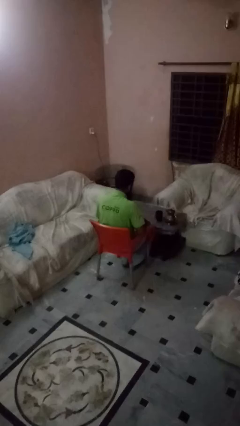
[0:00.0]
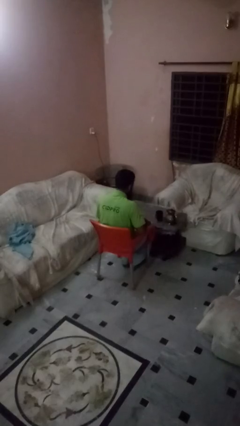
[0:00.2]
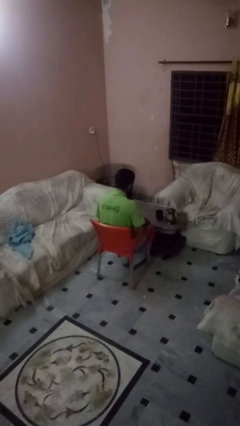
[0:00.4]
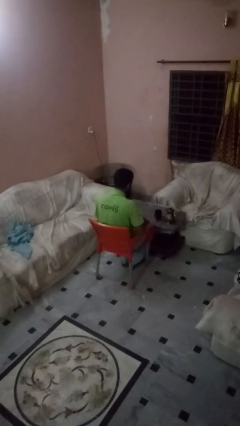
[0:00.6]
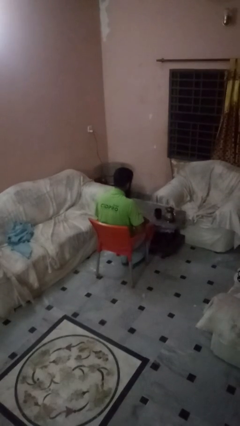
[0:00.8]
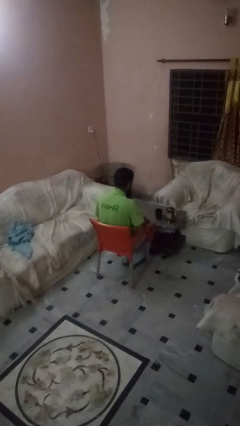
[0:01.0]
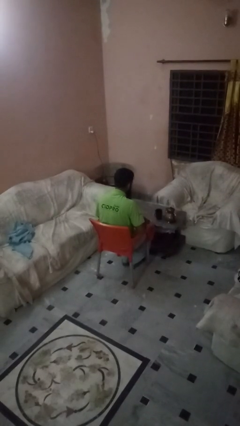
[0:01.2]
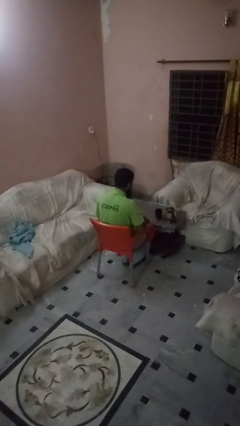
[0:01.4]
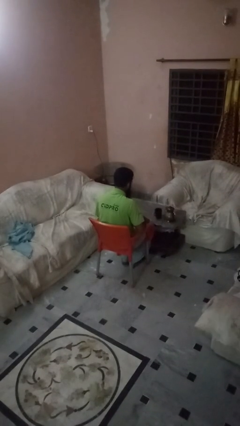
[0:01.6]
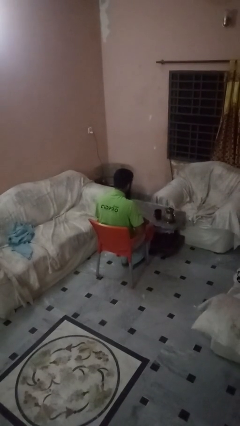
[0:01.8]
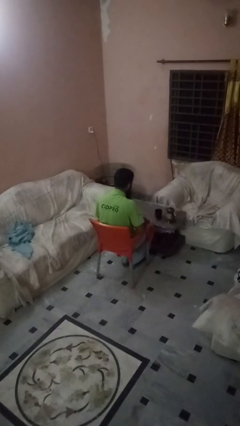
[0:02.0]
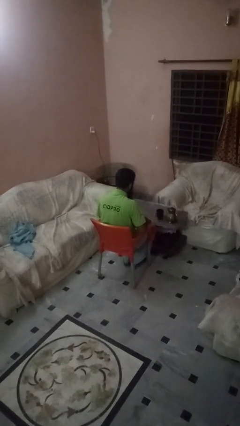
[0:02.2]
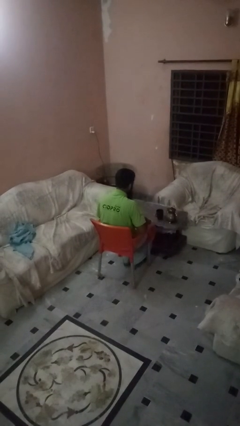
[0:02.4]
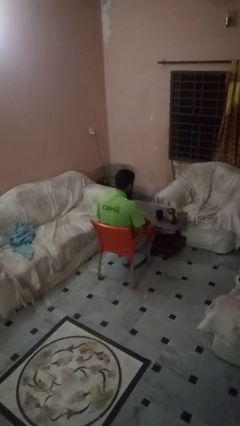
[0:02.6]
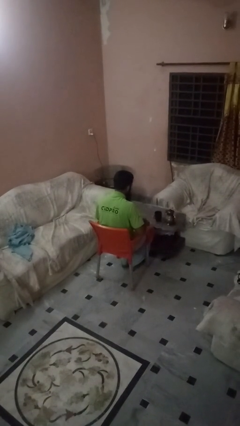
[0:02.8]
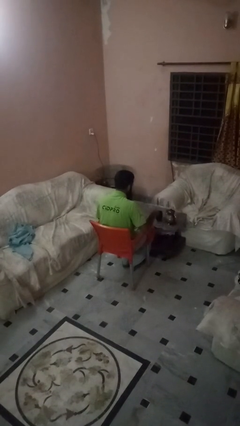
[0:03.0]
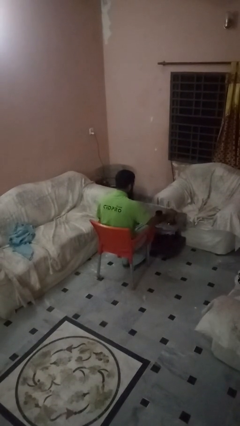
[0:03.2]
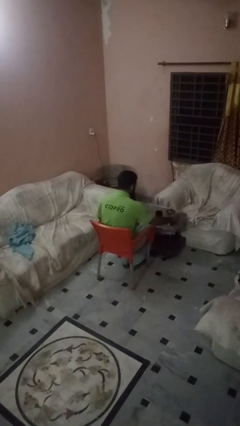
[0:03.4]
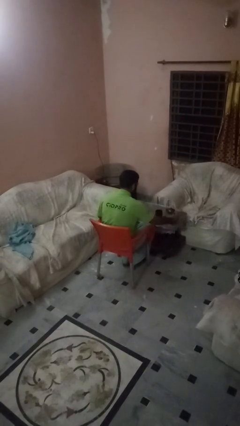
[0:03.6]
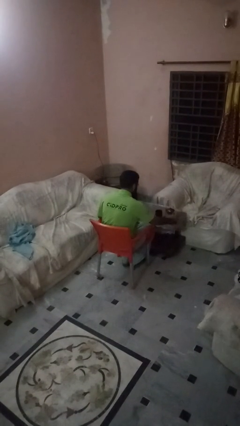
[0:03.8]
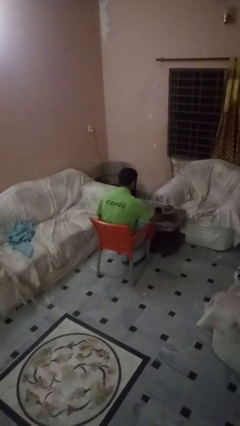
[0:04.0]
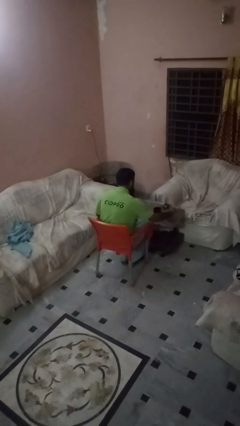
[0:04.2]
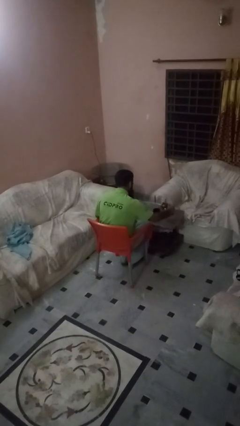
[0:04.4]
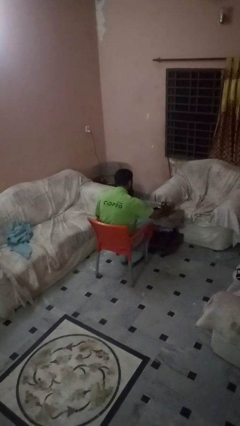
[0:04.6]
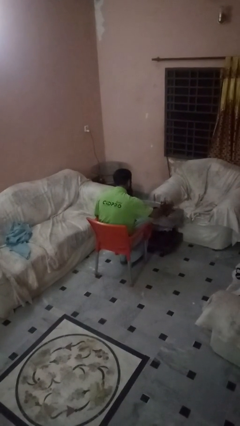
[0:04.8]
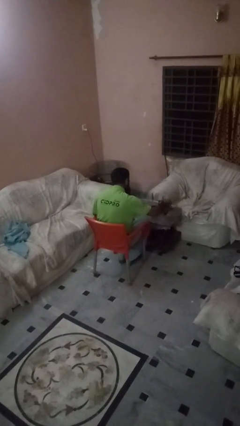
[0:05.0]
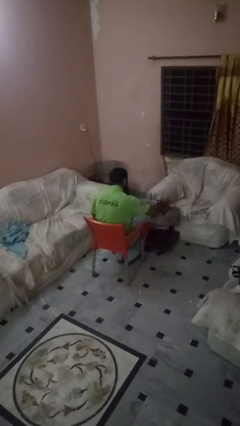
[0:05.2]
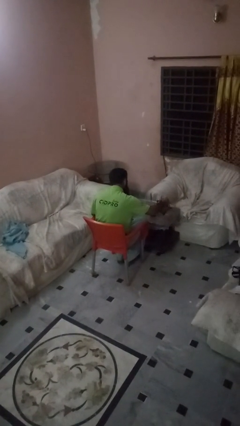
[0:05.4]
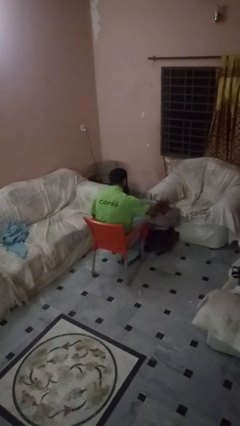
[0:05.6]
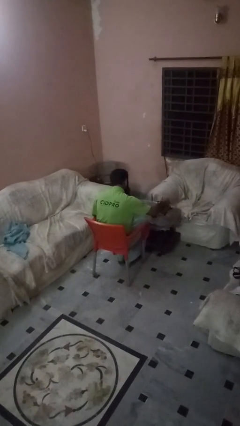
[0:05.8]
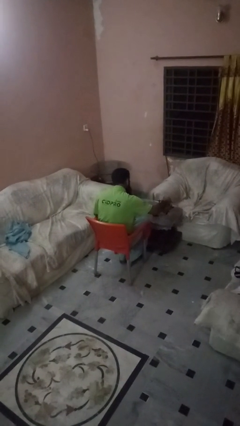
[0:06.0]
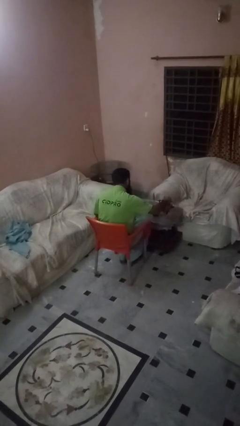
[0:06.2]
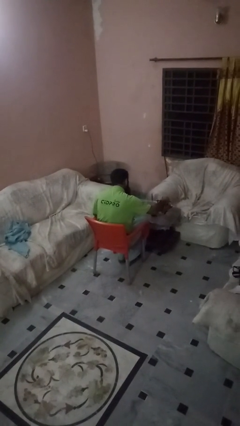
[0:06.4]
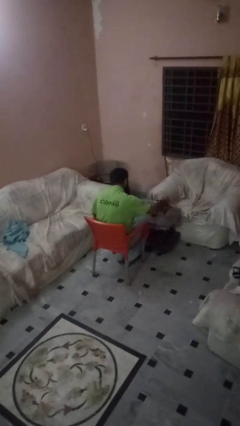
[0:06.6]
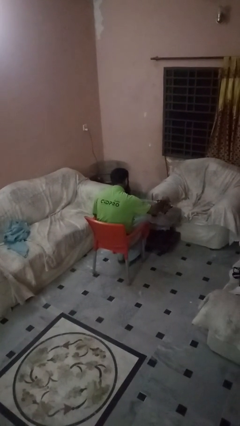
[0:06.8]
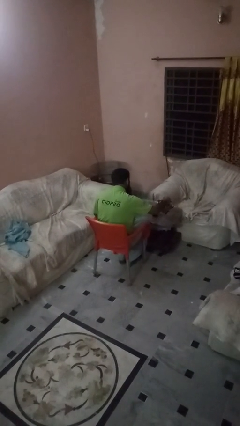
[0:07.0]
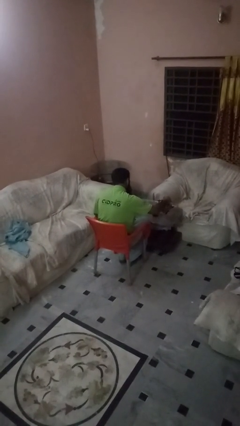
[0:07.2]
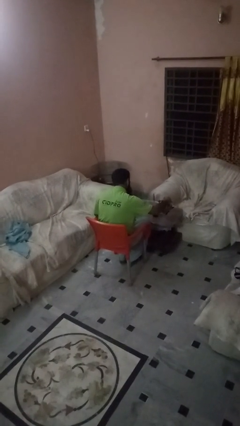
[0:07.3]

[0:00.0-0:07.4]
person pours coffee into mug

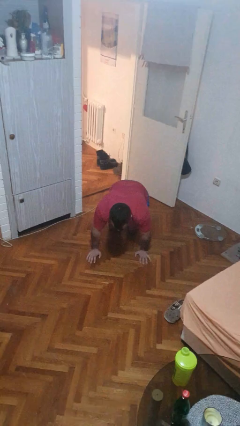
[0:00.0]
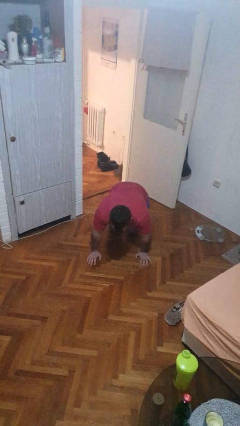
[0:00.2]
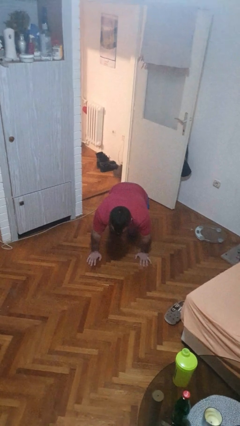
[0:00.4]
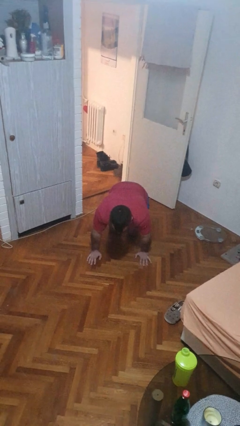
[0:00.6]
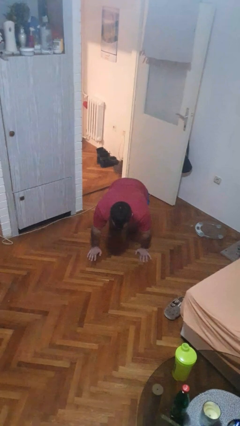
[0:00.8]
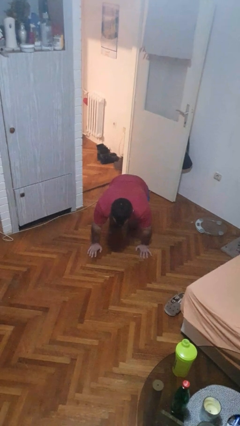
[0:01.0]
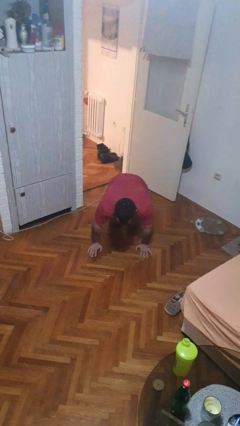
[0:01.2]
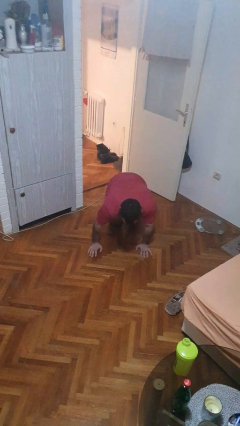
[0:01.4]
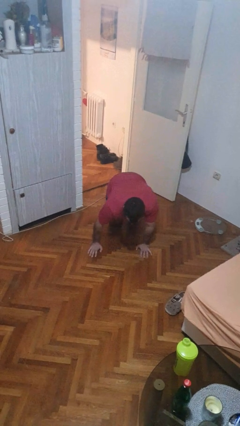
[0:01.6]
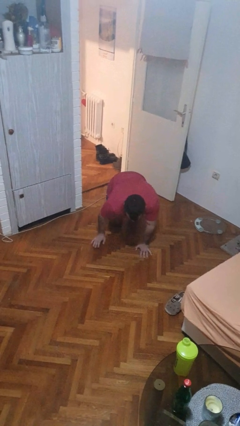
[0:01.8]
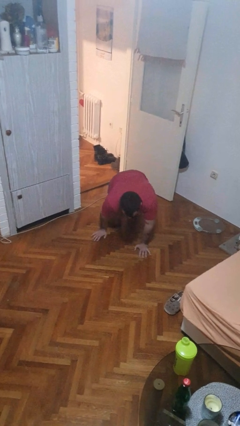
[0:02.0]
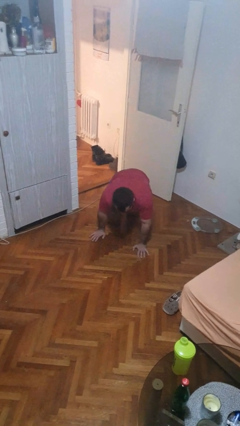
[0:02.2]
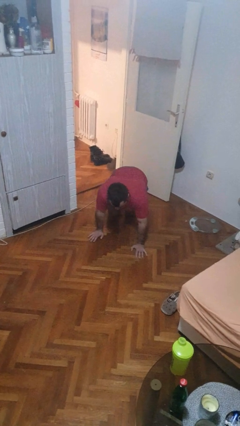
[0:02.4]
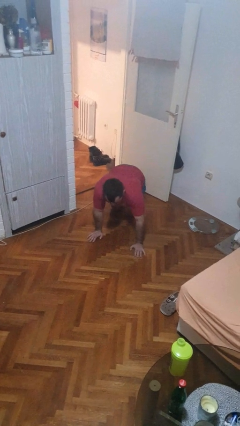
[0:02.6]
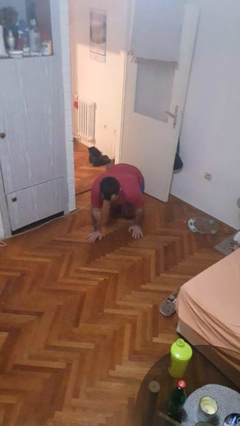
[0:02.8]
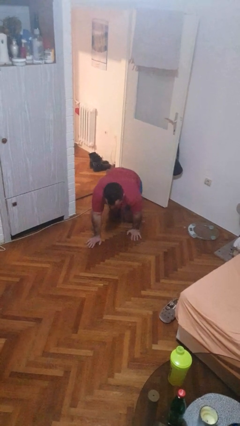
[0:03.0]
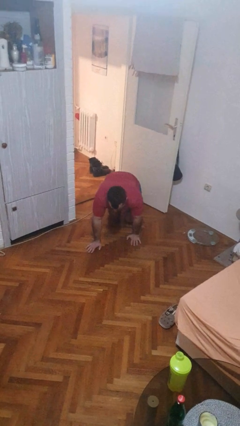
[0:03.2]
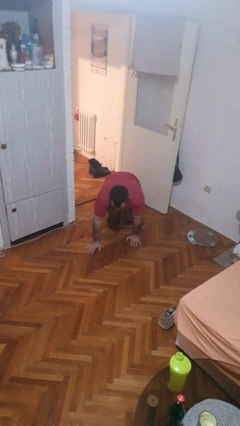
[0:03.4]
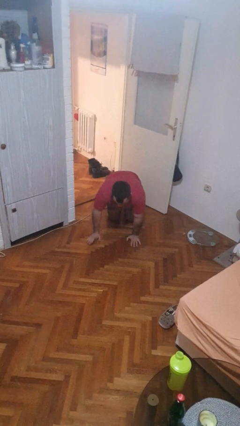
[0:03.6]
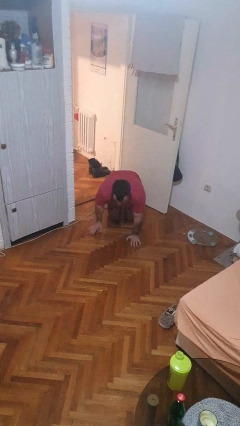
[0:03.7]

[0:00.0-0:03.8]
person crawls

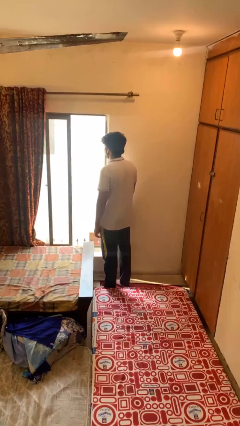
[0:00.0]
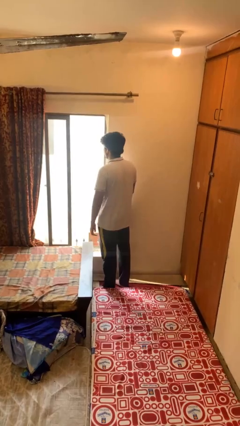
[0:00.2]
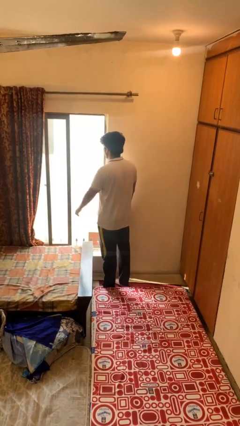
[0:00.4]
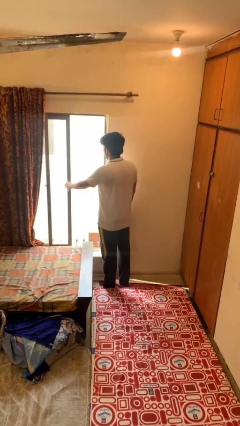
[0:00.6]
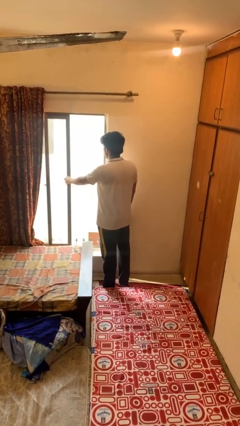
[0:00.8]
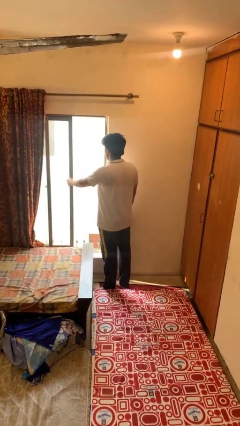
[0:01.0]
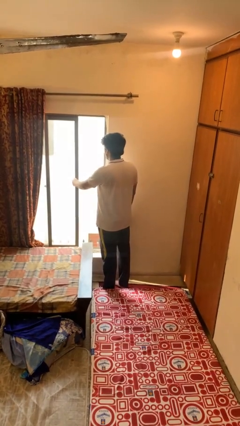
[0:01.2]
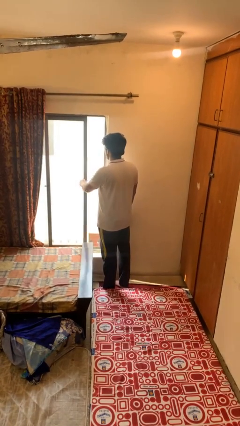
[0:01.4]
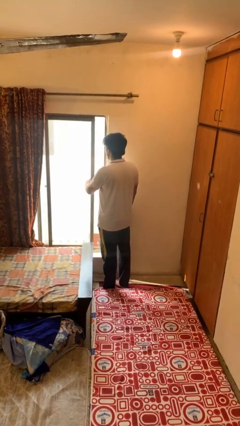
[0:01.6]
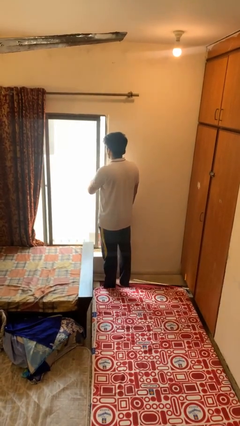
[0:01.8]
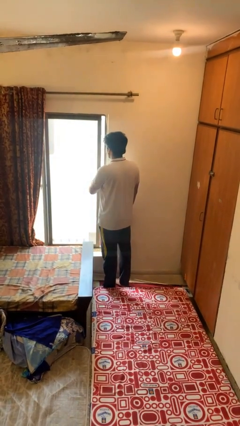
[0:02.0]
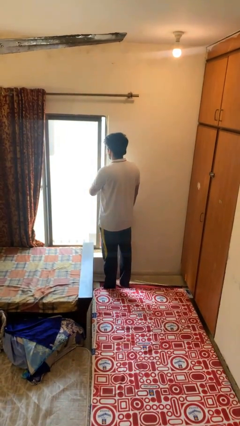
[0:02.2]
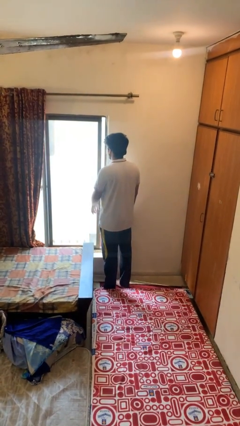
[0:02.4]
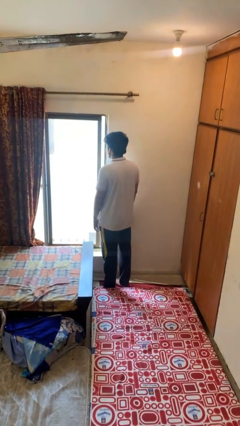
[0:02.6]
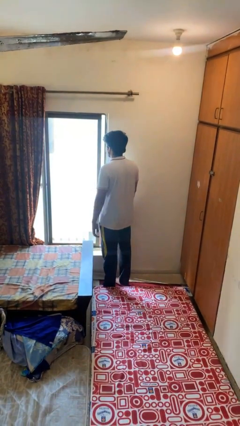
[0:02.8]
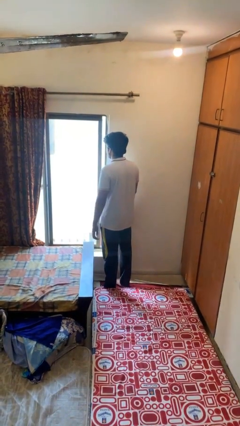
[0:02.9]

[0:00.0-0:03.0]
person closes home window

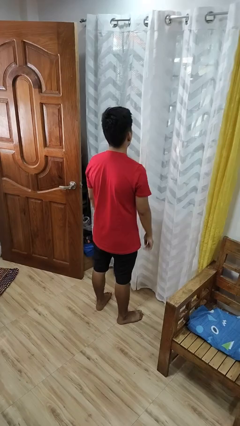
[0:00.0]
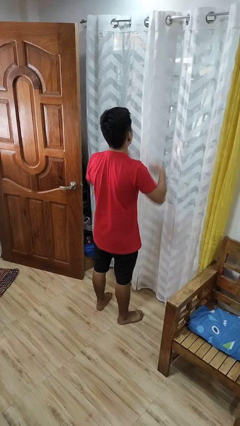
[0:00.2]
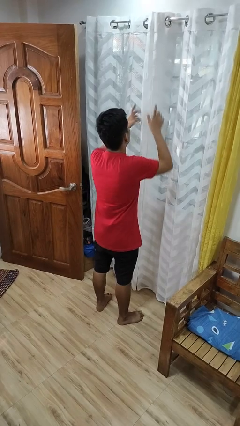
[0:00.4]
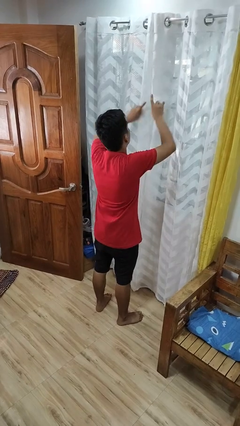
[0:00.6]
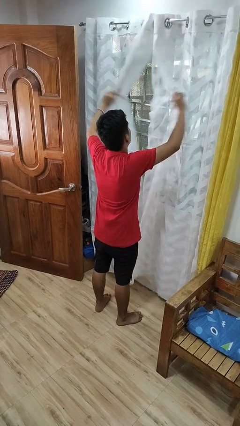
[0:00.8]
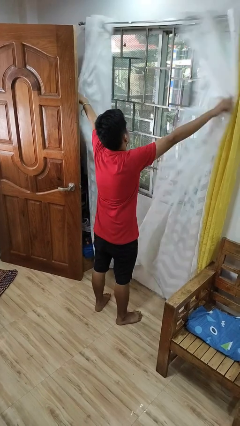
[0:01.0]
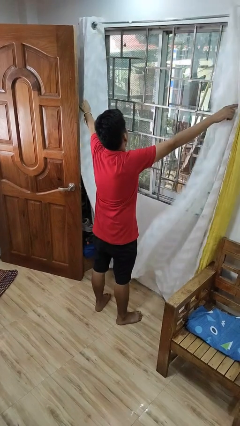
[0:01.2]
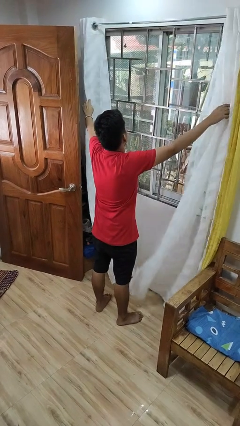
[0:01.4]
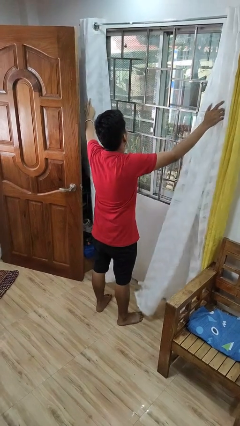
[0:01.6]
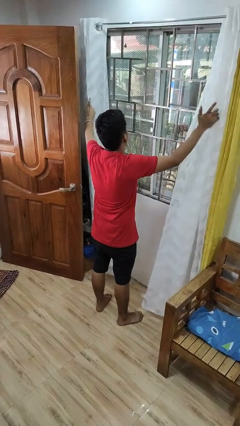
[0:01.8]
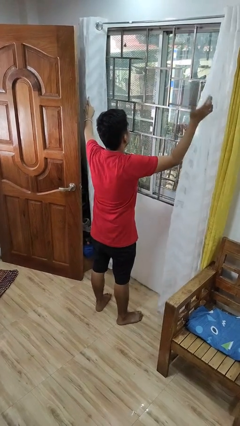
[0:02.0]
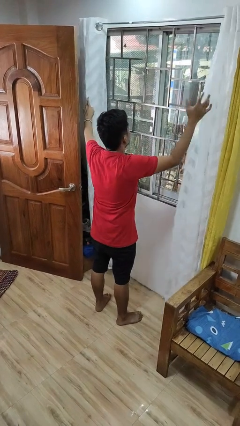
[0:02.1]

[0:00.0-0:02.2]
person opens curtains

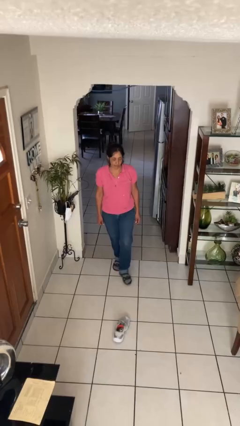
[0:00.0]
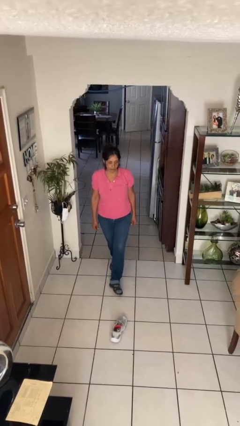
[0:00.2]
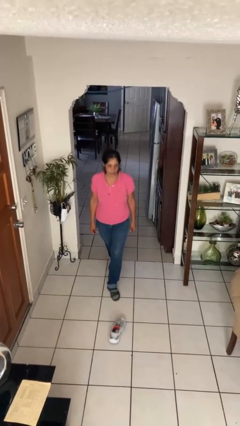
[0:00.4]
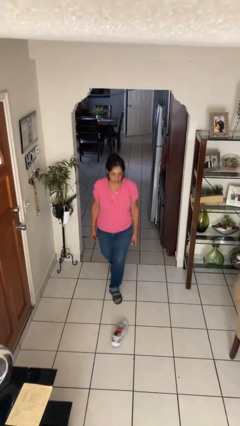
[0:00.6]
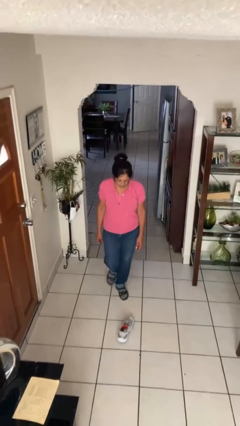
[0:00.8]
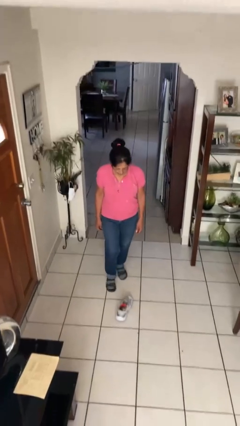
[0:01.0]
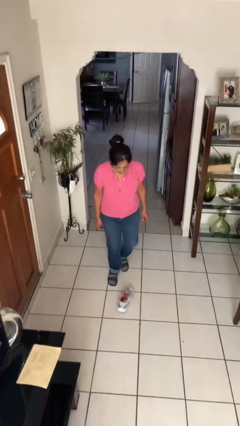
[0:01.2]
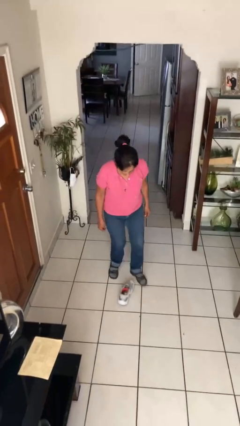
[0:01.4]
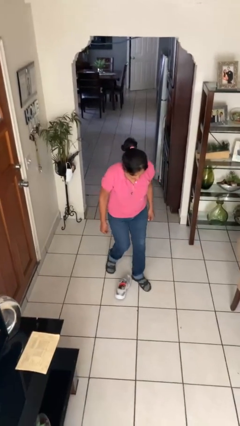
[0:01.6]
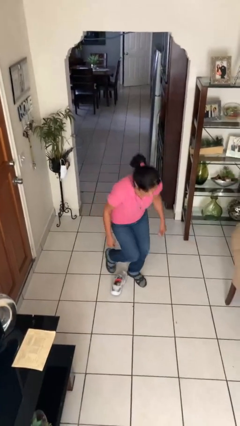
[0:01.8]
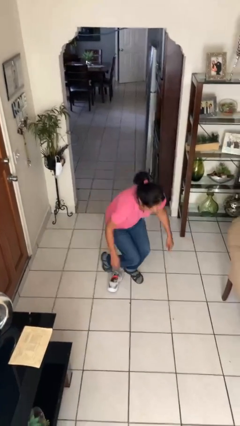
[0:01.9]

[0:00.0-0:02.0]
person trips on object on floor
